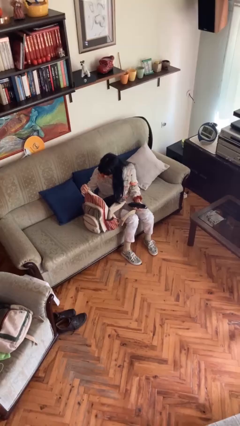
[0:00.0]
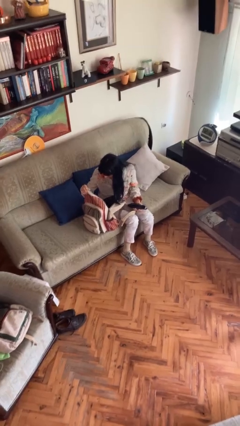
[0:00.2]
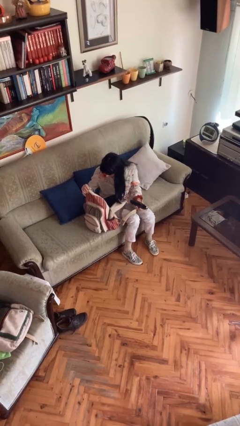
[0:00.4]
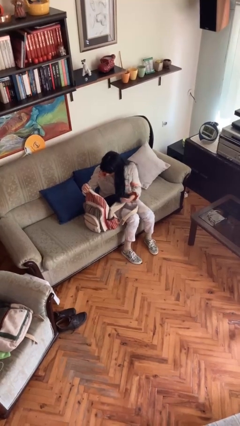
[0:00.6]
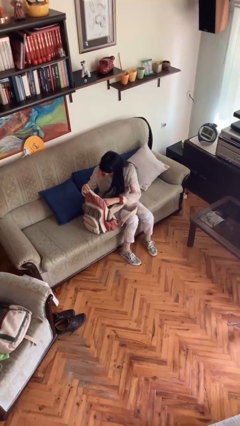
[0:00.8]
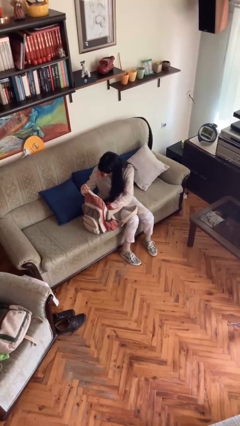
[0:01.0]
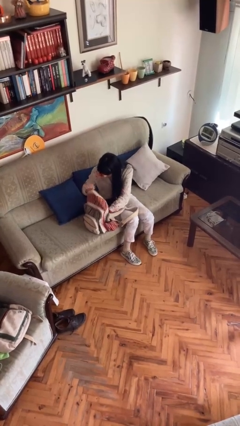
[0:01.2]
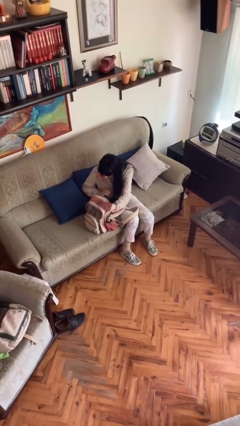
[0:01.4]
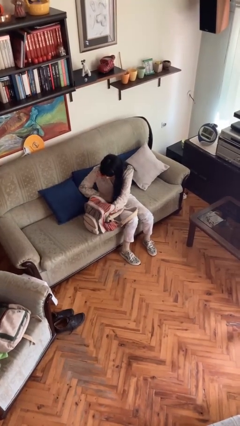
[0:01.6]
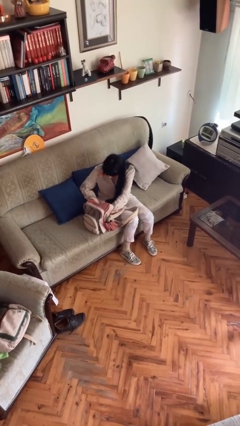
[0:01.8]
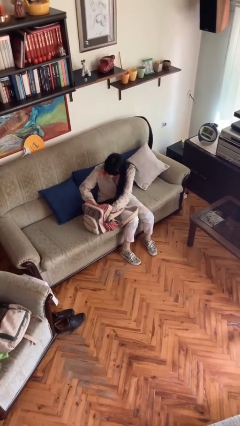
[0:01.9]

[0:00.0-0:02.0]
person puts object into backpack

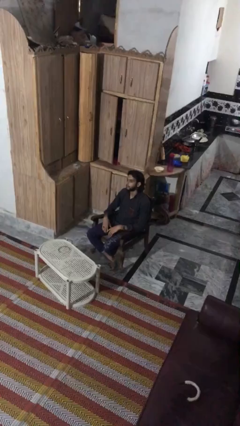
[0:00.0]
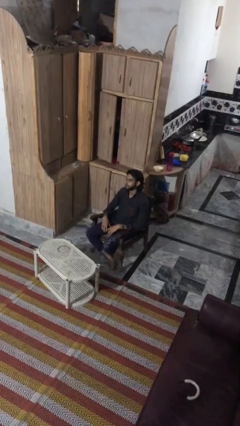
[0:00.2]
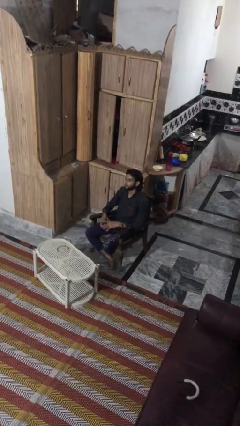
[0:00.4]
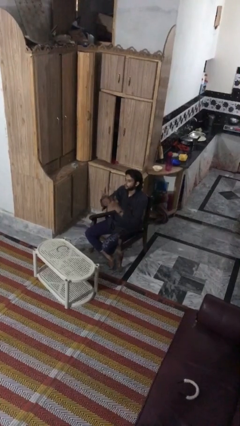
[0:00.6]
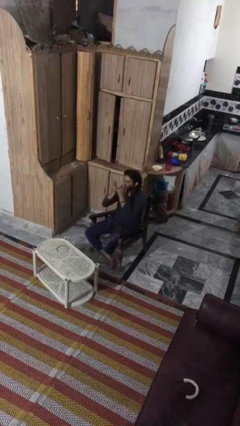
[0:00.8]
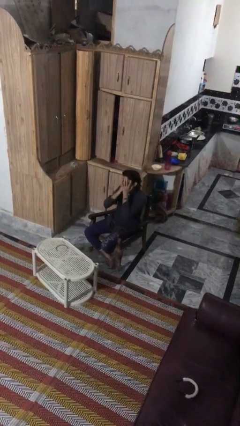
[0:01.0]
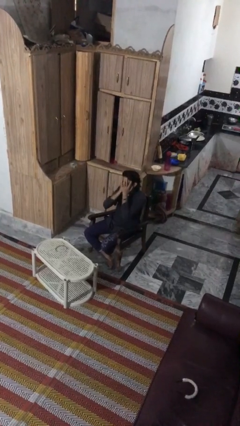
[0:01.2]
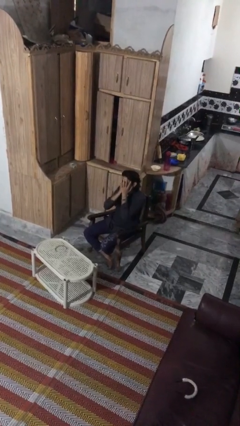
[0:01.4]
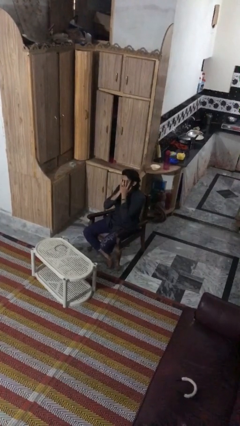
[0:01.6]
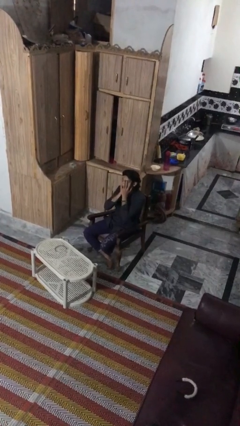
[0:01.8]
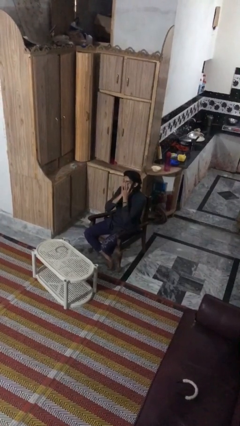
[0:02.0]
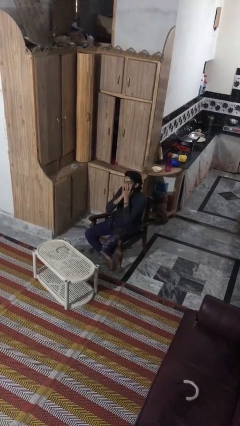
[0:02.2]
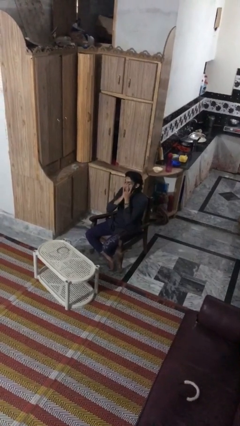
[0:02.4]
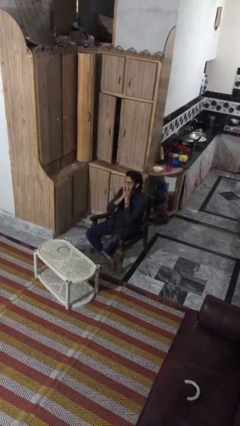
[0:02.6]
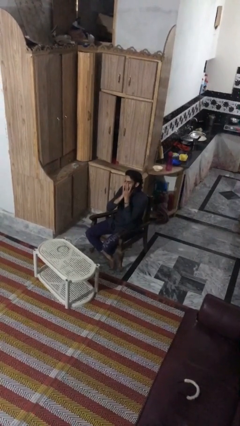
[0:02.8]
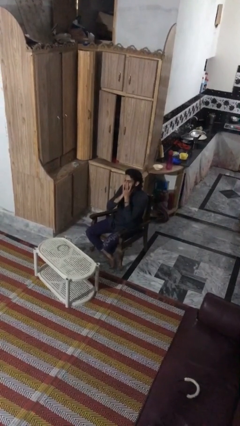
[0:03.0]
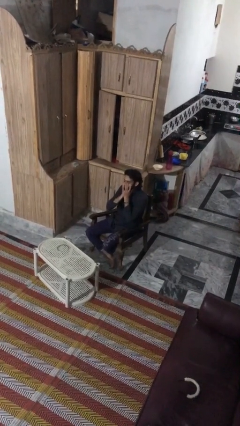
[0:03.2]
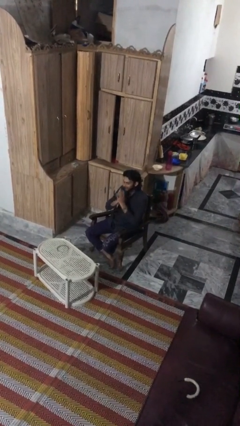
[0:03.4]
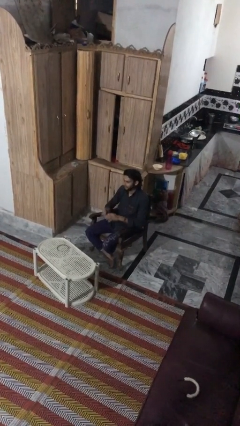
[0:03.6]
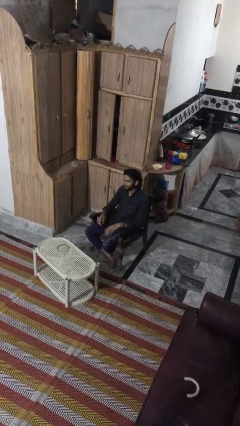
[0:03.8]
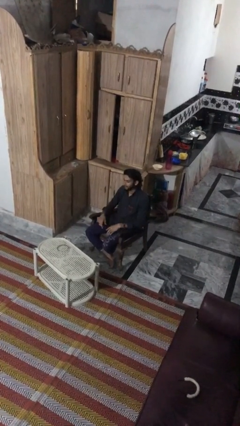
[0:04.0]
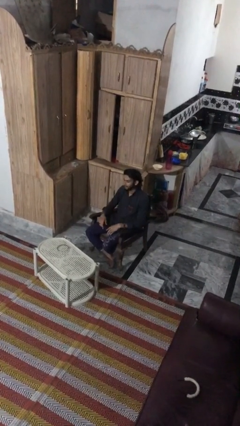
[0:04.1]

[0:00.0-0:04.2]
person covers face with hands

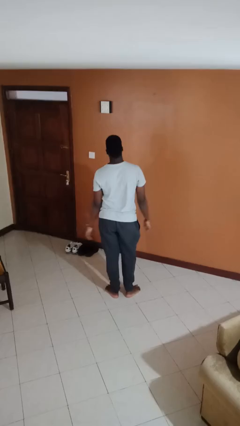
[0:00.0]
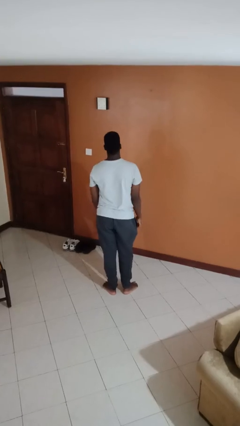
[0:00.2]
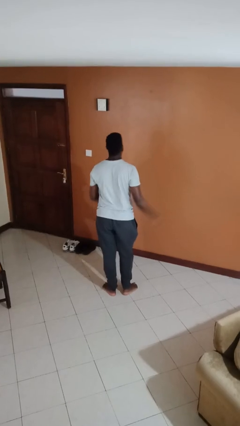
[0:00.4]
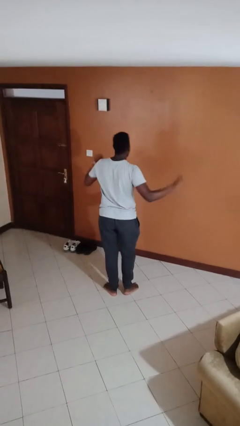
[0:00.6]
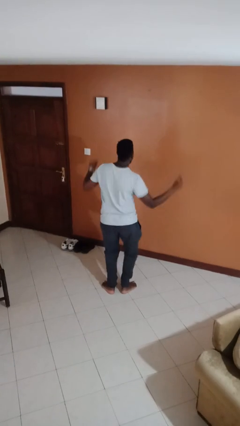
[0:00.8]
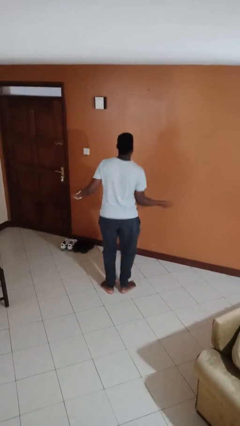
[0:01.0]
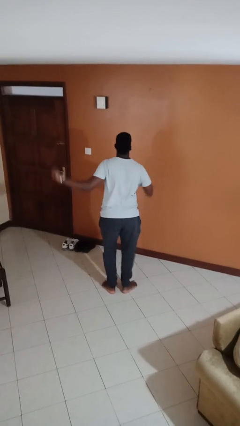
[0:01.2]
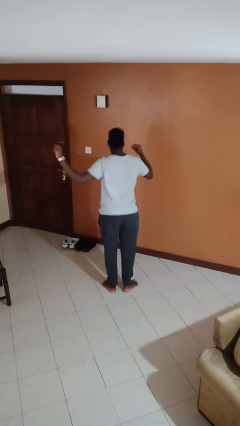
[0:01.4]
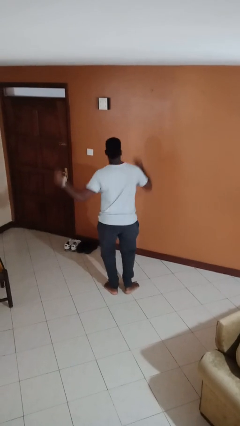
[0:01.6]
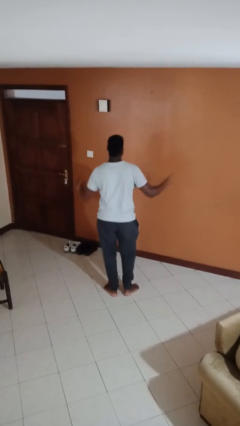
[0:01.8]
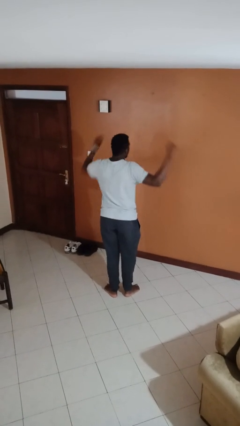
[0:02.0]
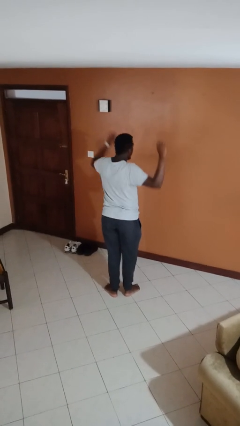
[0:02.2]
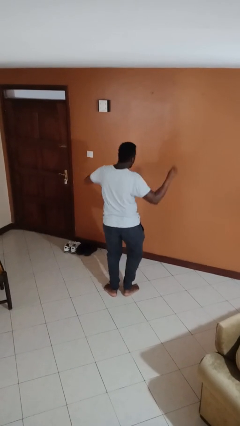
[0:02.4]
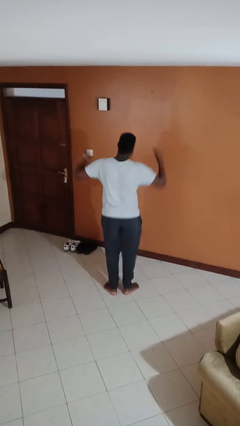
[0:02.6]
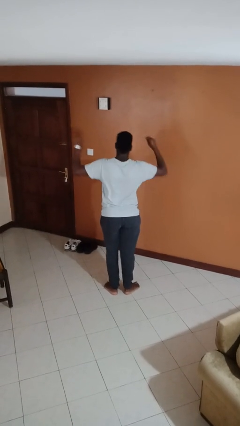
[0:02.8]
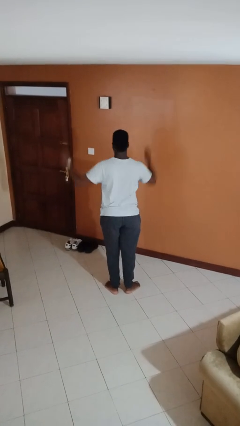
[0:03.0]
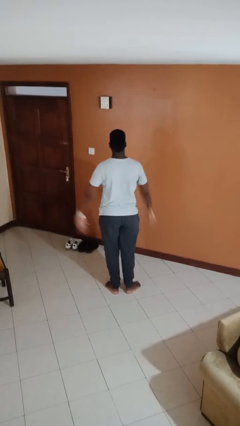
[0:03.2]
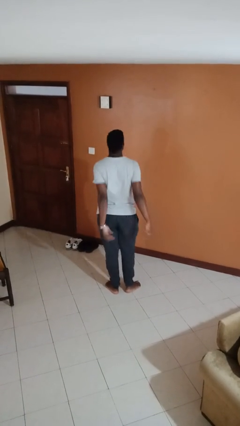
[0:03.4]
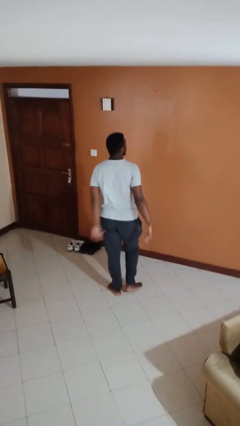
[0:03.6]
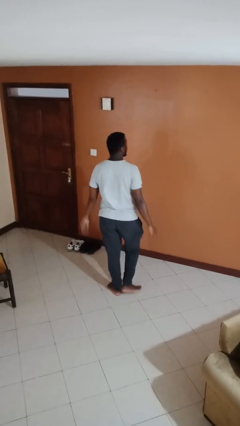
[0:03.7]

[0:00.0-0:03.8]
person dances in place

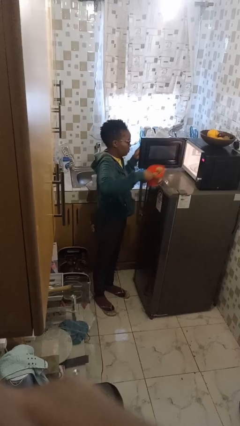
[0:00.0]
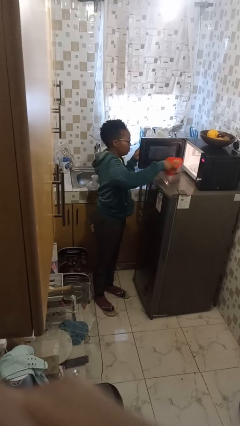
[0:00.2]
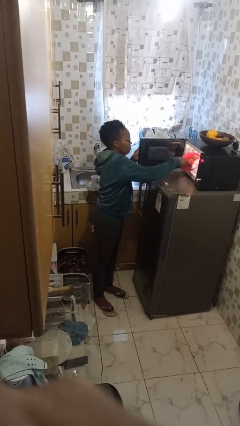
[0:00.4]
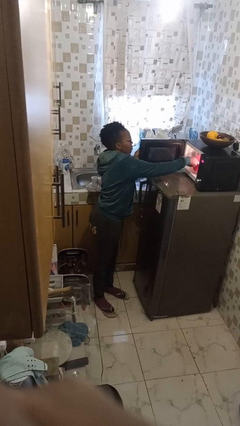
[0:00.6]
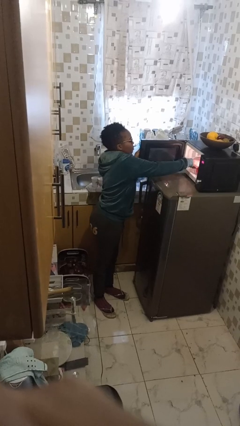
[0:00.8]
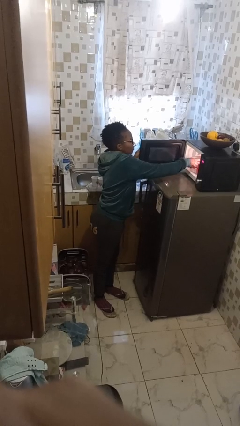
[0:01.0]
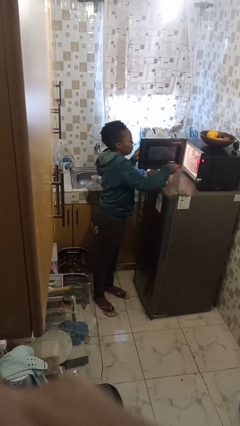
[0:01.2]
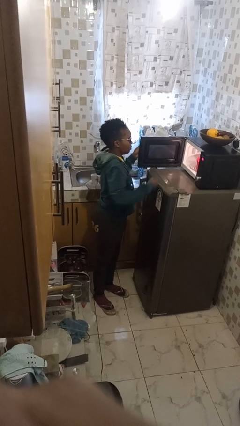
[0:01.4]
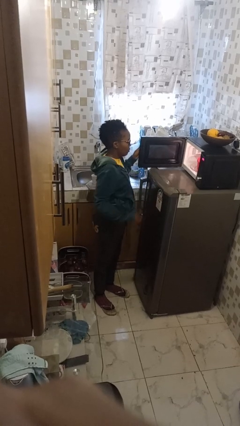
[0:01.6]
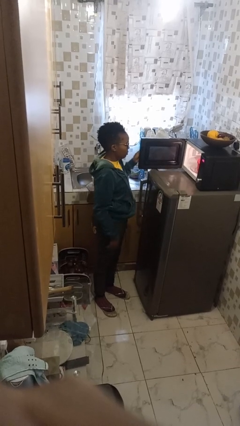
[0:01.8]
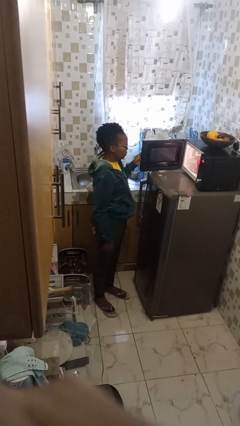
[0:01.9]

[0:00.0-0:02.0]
person puts object into microwave

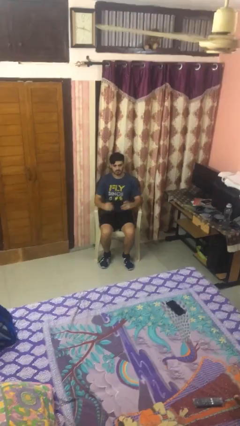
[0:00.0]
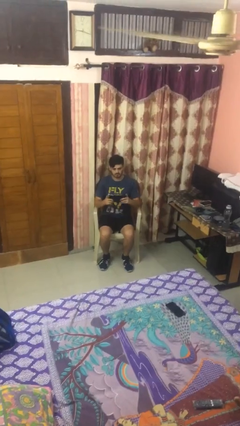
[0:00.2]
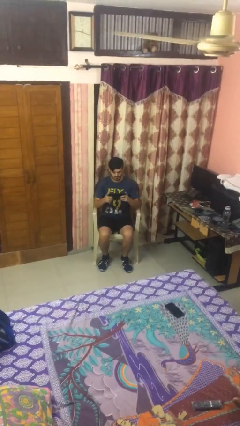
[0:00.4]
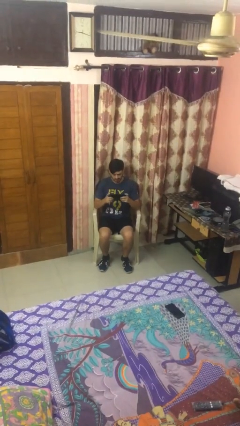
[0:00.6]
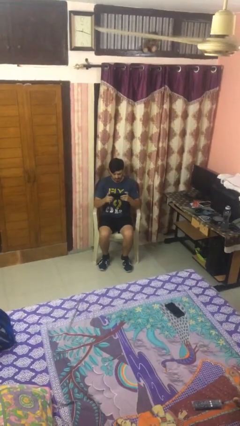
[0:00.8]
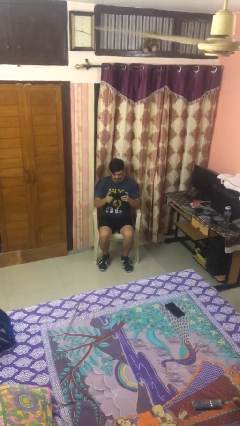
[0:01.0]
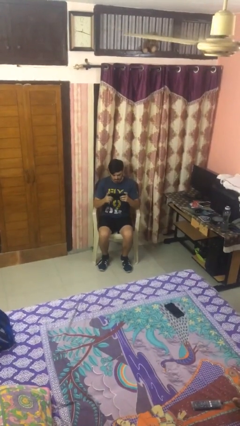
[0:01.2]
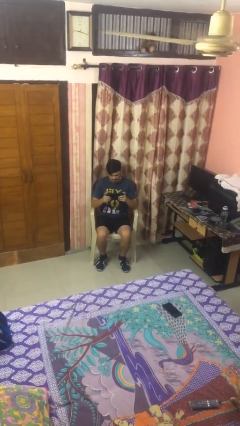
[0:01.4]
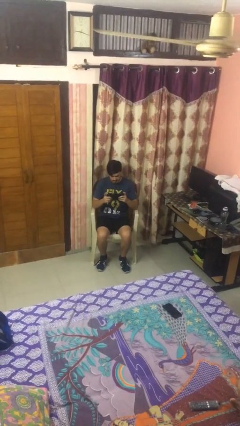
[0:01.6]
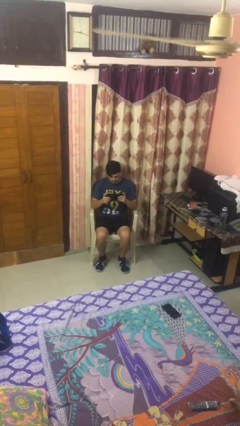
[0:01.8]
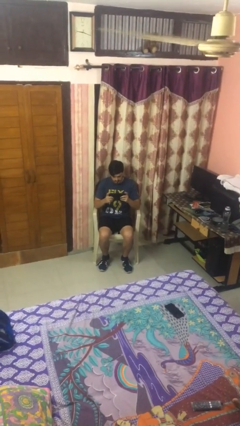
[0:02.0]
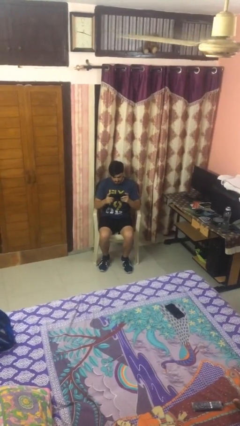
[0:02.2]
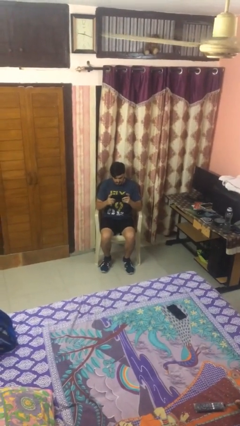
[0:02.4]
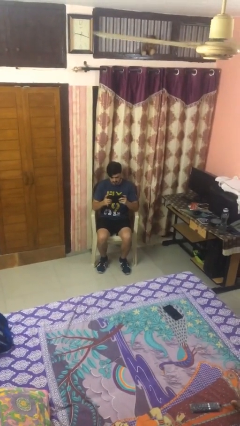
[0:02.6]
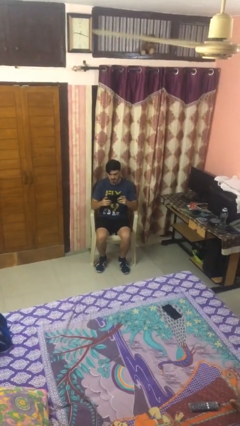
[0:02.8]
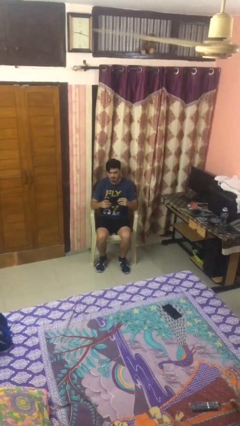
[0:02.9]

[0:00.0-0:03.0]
person interacts with handheld game

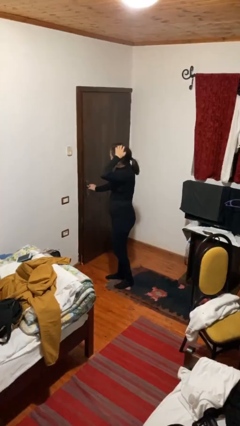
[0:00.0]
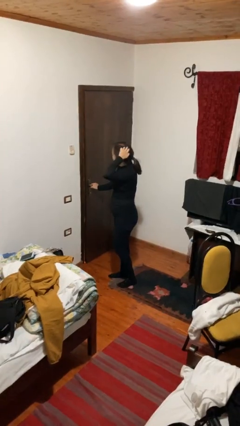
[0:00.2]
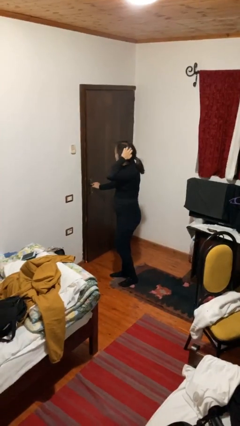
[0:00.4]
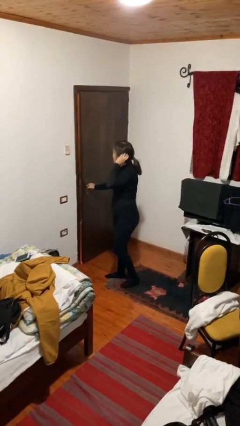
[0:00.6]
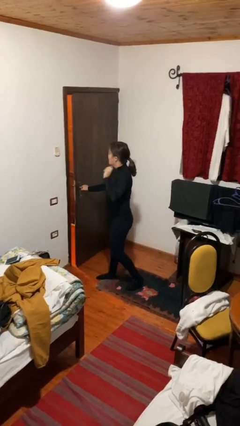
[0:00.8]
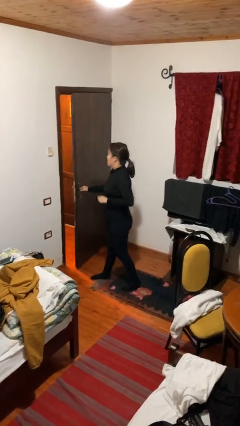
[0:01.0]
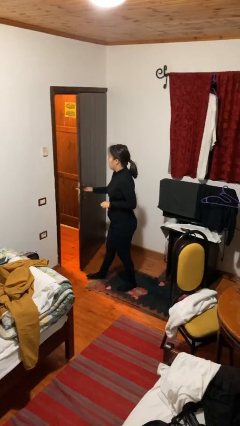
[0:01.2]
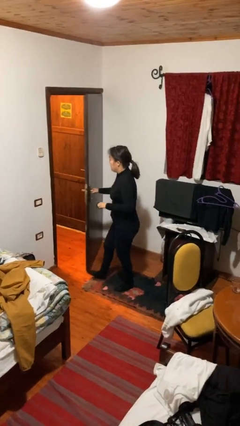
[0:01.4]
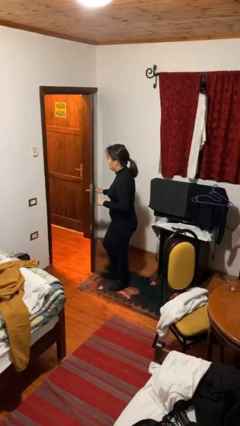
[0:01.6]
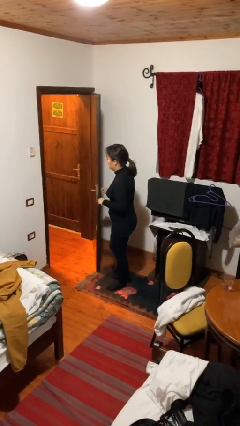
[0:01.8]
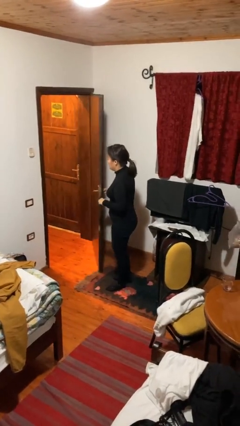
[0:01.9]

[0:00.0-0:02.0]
person opens facility door
